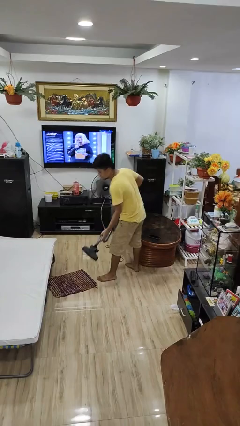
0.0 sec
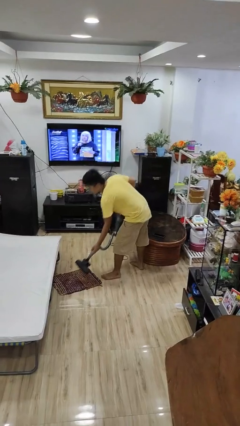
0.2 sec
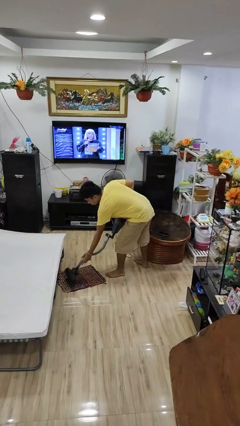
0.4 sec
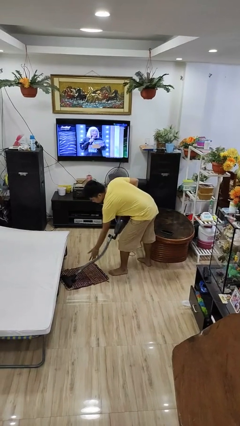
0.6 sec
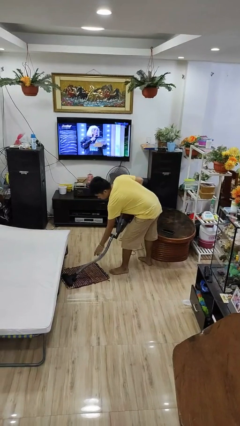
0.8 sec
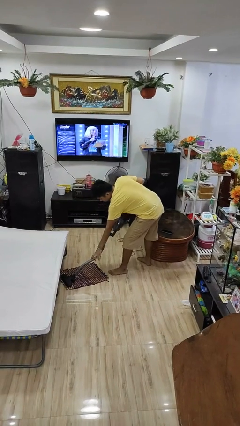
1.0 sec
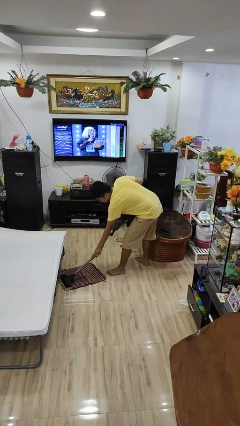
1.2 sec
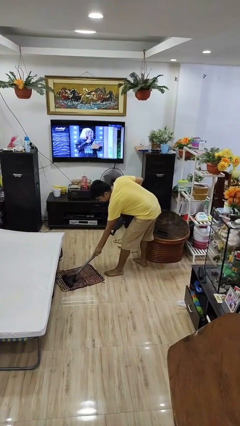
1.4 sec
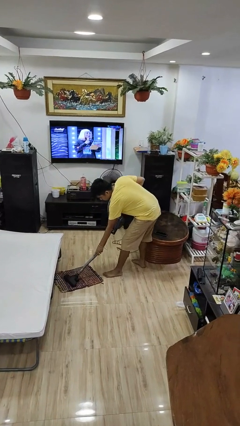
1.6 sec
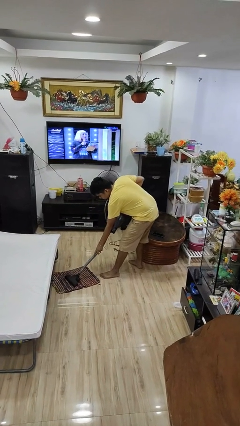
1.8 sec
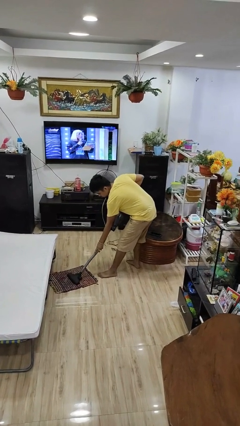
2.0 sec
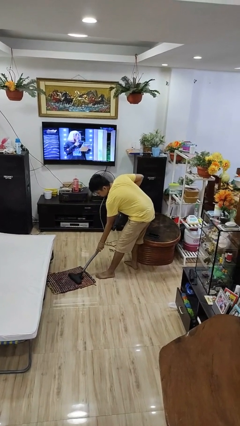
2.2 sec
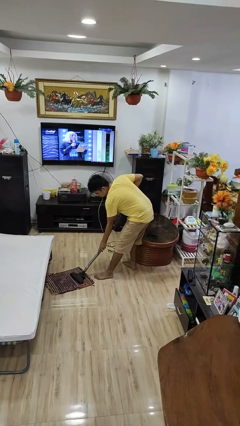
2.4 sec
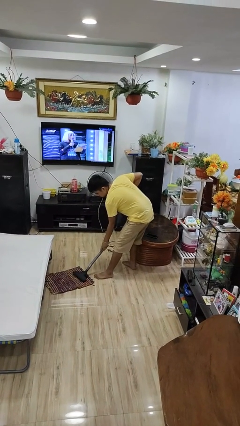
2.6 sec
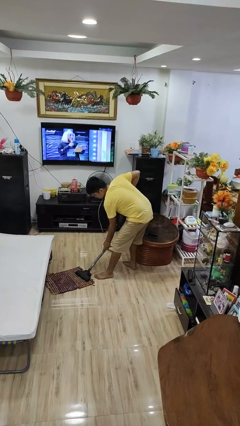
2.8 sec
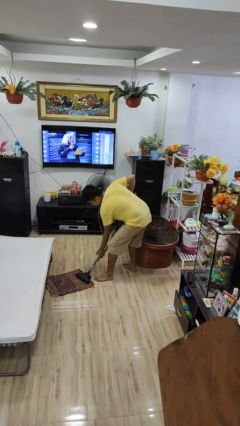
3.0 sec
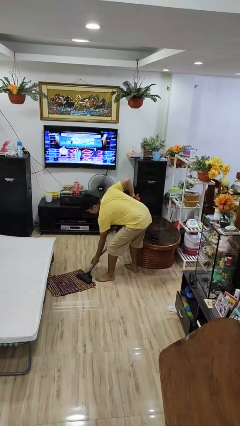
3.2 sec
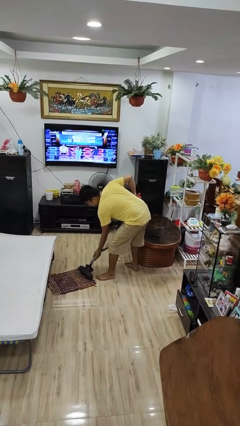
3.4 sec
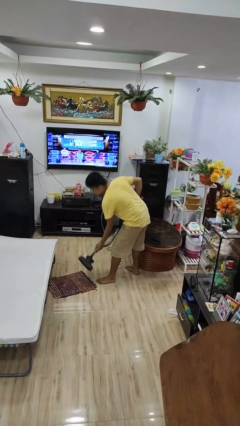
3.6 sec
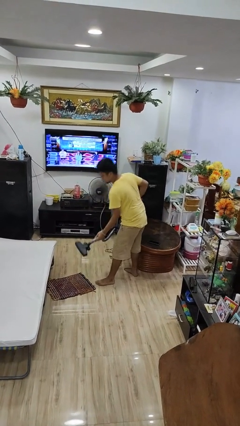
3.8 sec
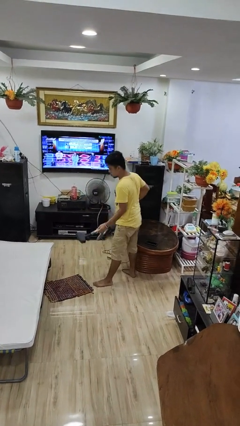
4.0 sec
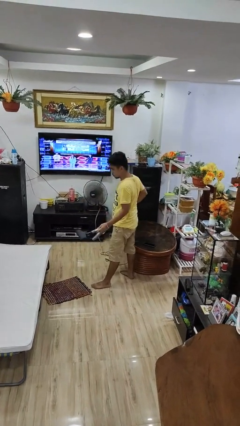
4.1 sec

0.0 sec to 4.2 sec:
person vacuums carpet

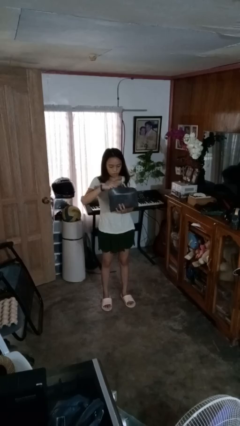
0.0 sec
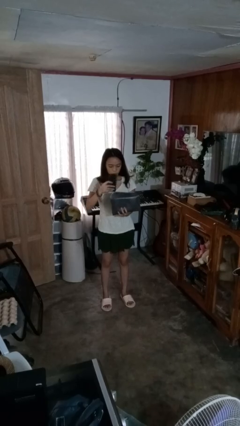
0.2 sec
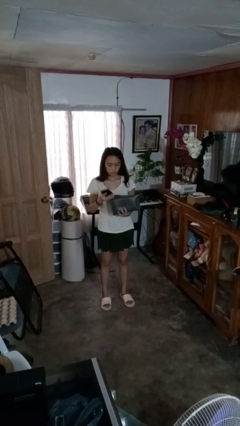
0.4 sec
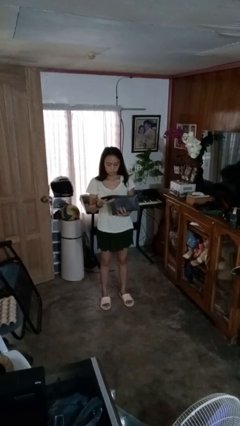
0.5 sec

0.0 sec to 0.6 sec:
person takes object from purse

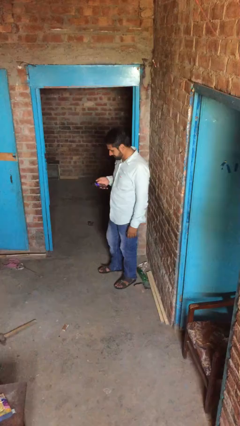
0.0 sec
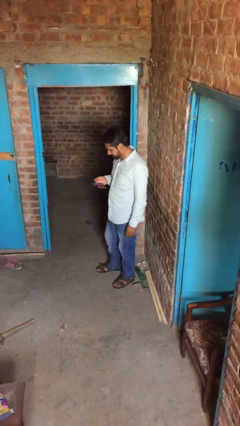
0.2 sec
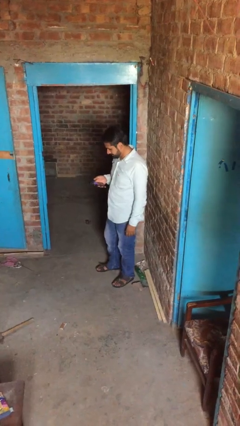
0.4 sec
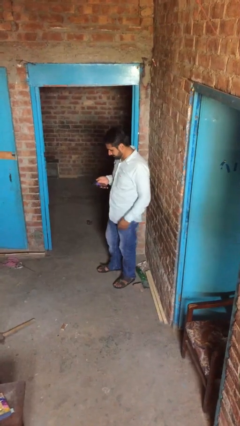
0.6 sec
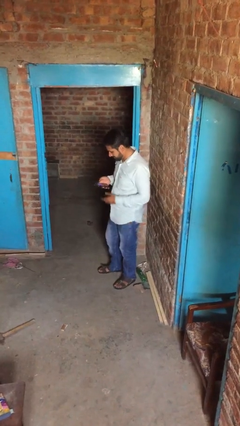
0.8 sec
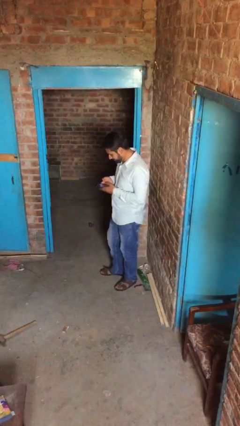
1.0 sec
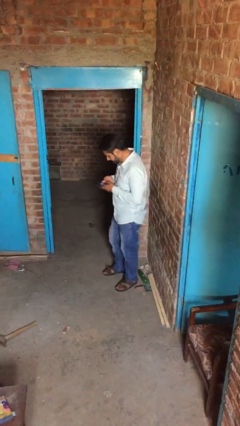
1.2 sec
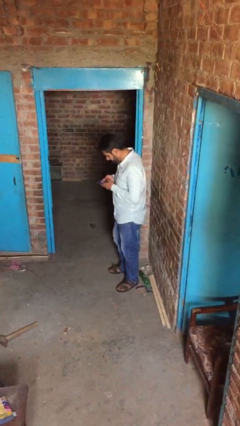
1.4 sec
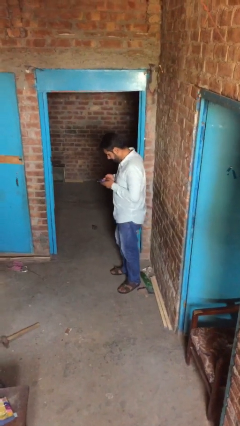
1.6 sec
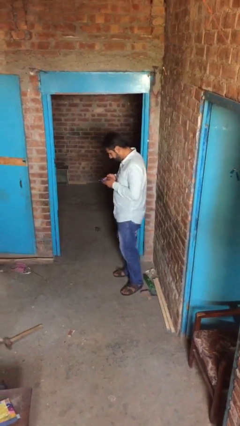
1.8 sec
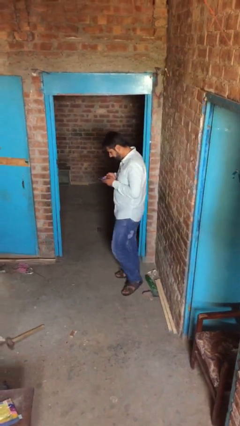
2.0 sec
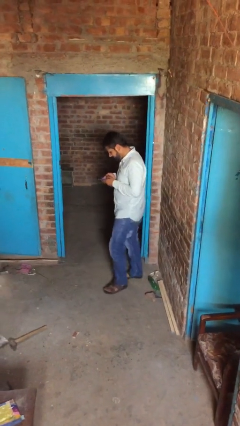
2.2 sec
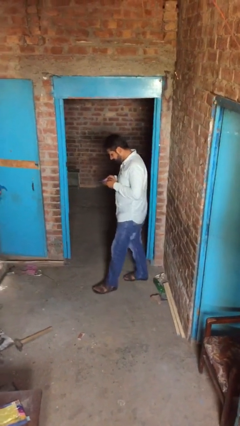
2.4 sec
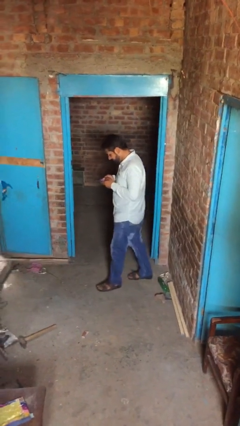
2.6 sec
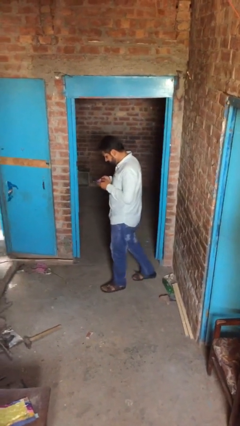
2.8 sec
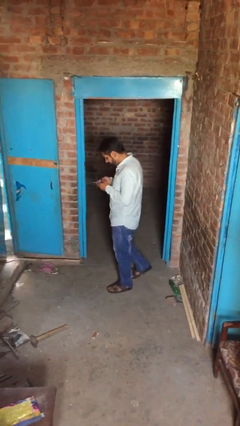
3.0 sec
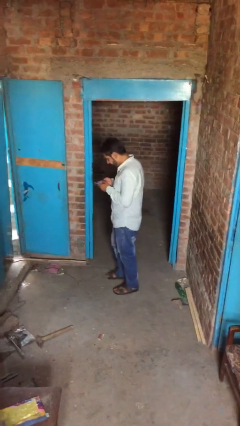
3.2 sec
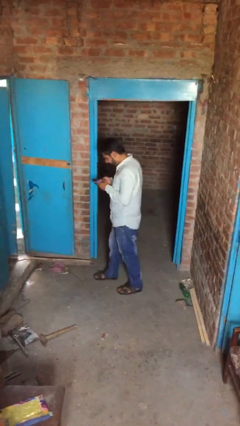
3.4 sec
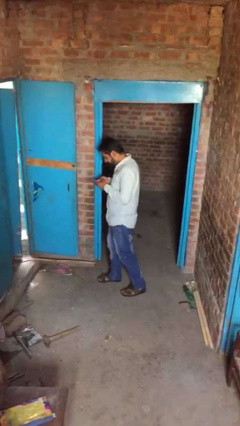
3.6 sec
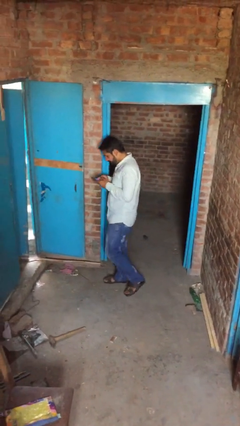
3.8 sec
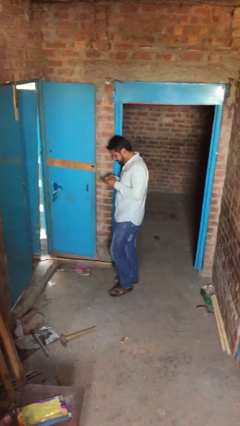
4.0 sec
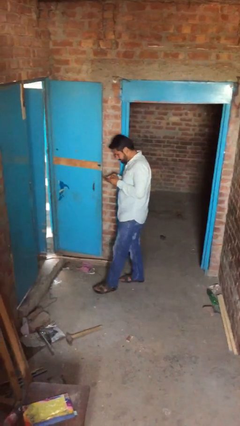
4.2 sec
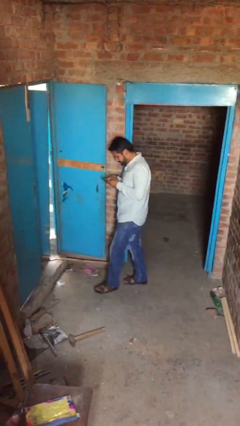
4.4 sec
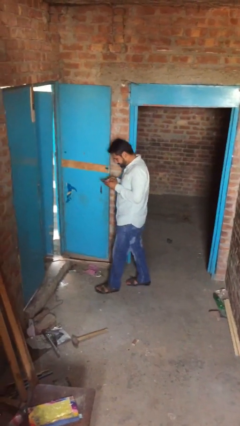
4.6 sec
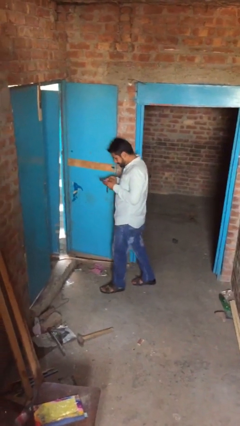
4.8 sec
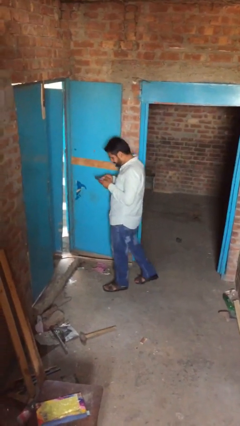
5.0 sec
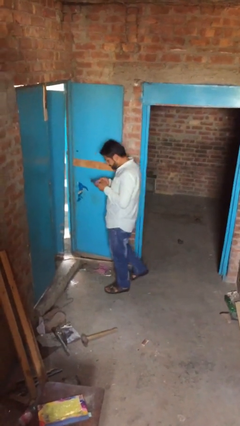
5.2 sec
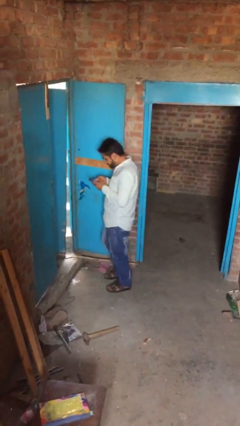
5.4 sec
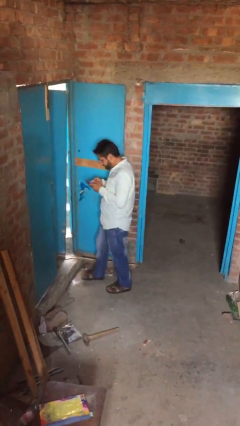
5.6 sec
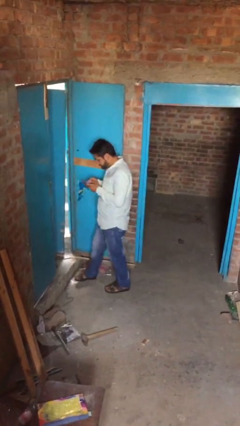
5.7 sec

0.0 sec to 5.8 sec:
person texts on phone

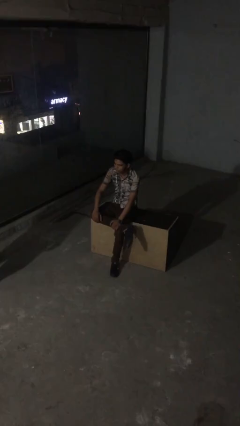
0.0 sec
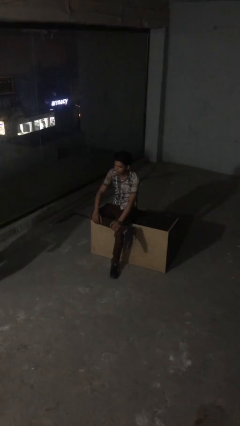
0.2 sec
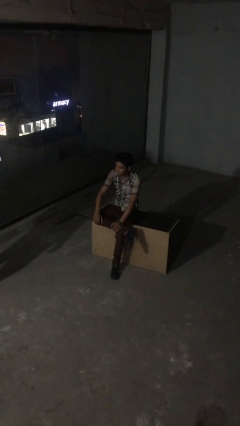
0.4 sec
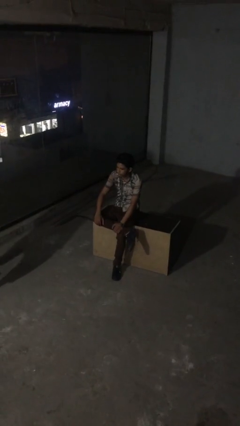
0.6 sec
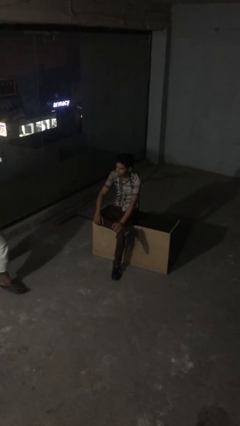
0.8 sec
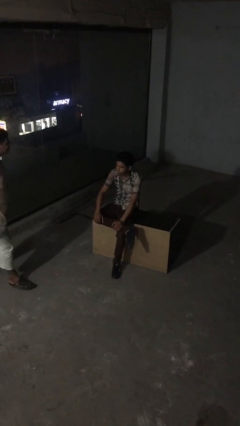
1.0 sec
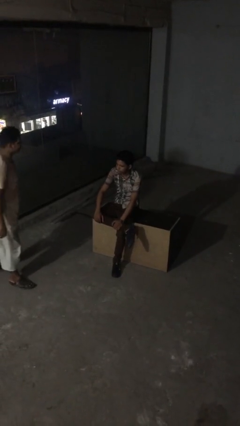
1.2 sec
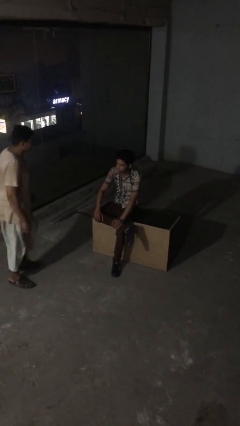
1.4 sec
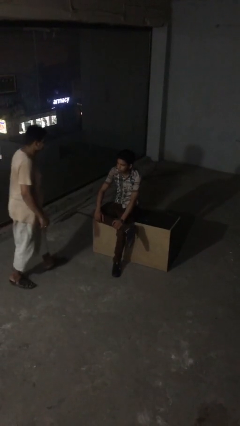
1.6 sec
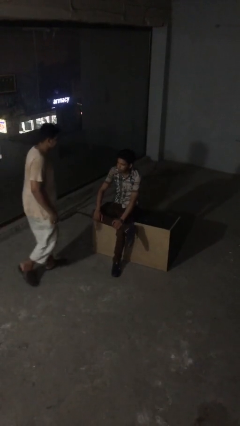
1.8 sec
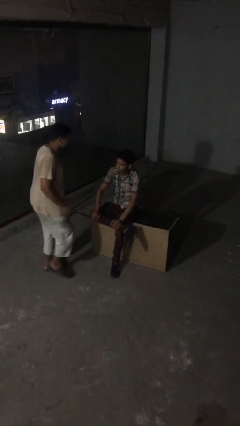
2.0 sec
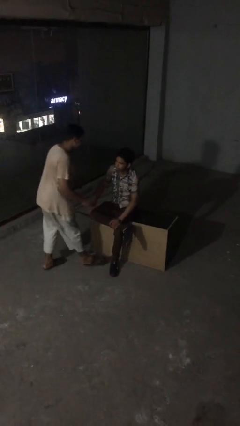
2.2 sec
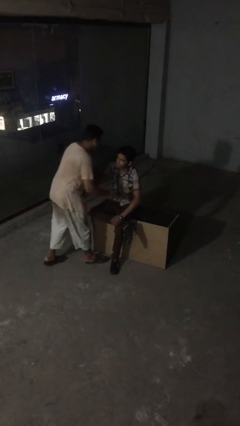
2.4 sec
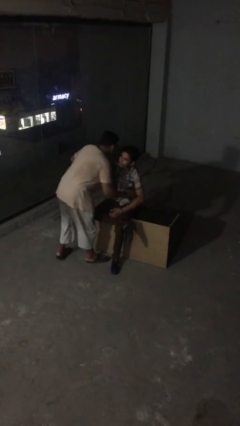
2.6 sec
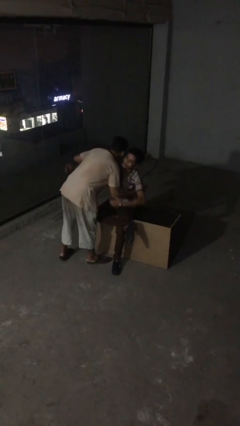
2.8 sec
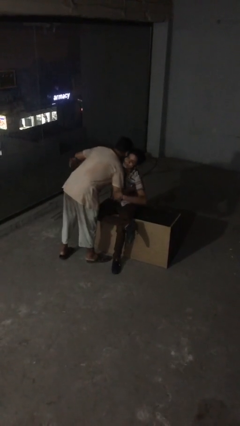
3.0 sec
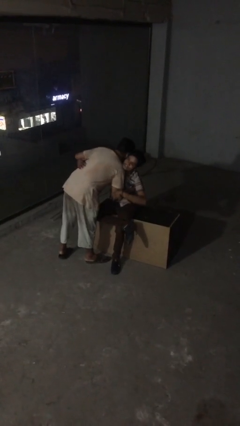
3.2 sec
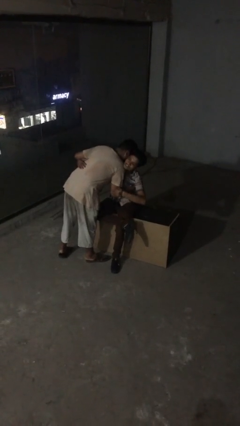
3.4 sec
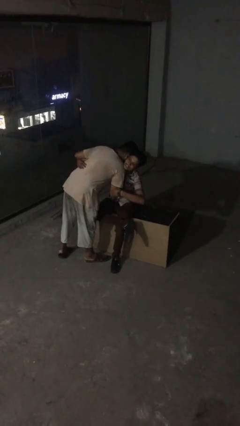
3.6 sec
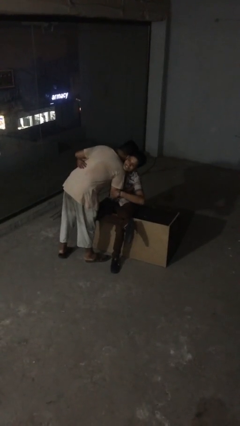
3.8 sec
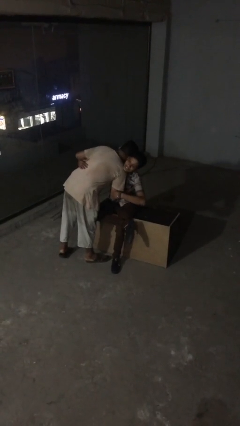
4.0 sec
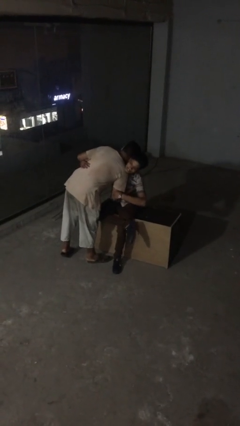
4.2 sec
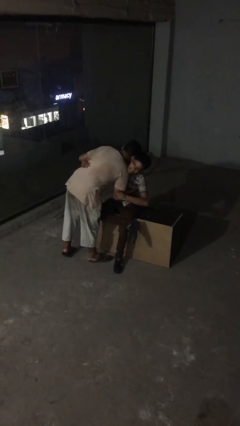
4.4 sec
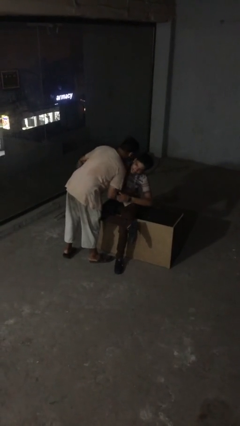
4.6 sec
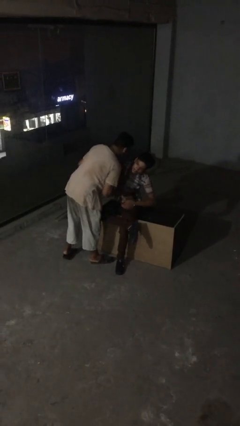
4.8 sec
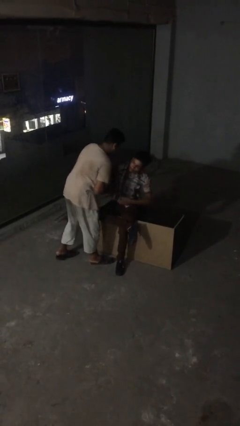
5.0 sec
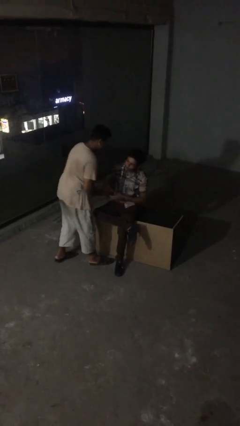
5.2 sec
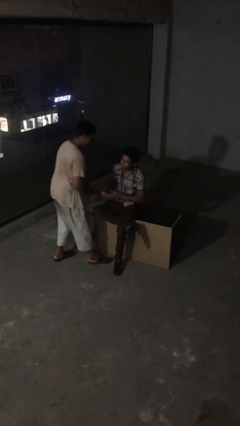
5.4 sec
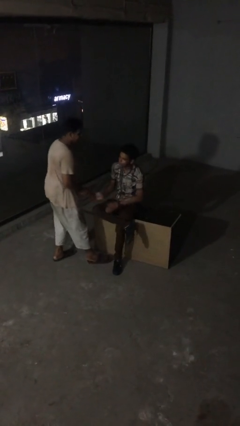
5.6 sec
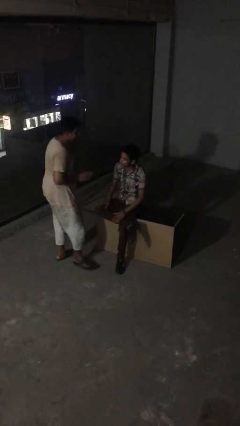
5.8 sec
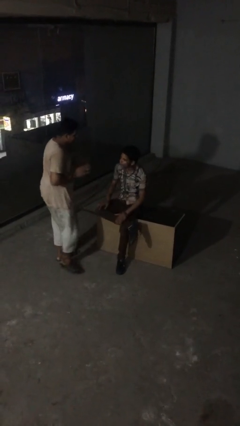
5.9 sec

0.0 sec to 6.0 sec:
person embraces person

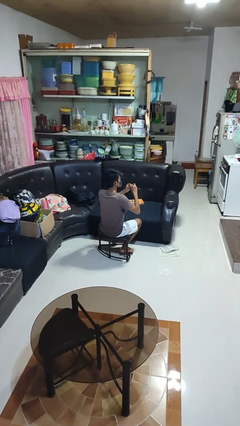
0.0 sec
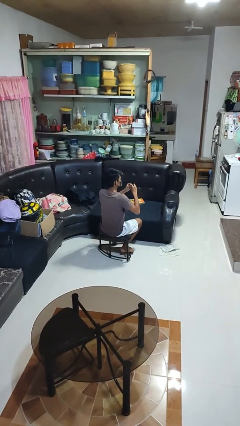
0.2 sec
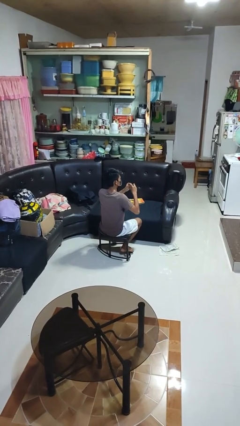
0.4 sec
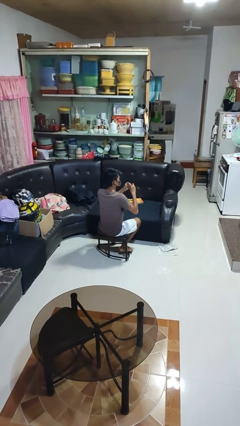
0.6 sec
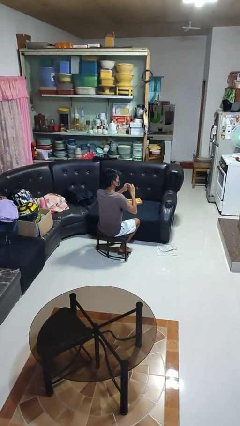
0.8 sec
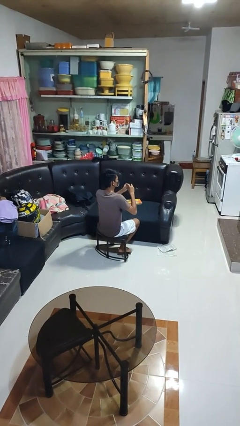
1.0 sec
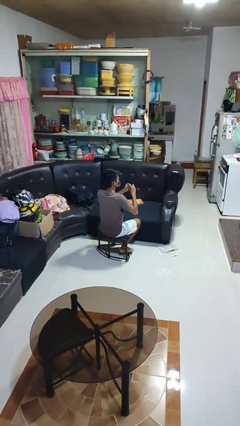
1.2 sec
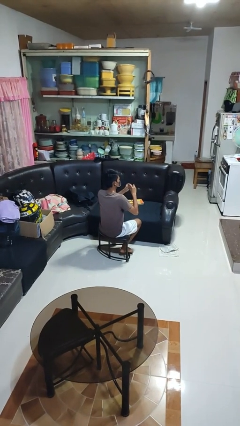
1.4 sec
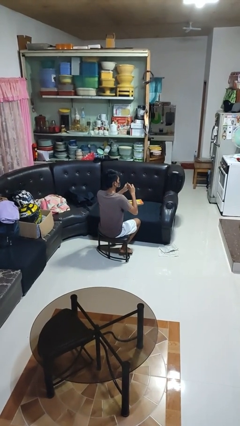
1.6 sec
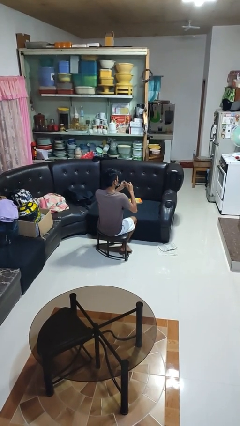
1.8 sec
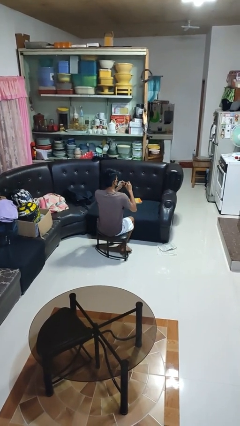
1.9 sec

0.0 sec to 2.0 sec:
person files fingernails
